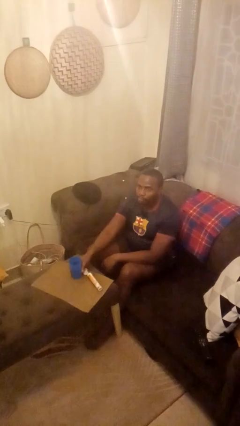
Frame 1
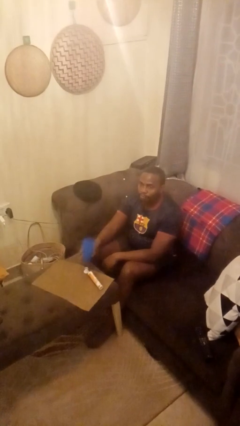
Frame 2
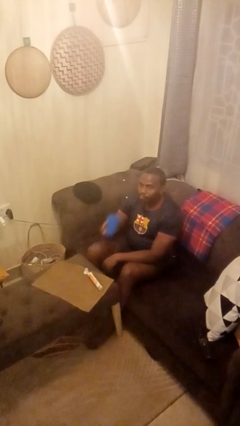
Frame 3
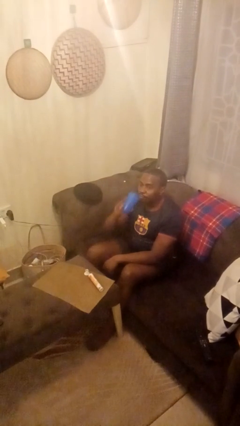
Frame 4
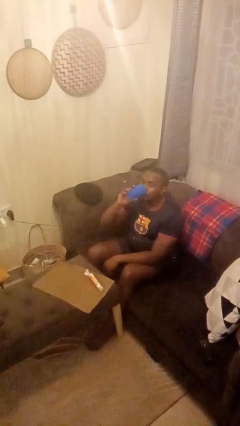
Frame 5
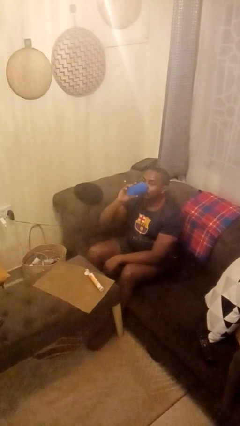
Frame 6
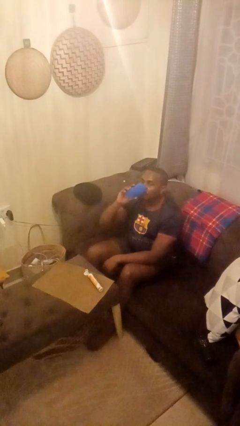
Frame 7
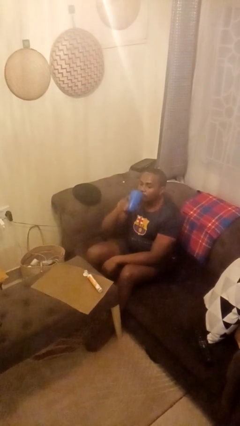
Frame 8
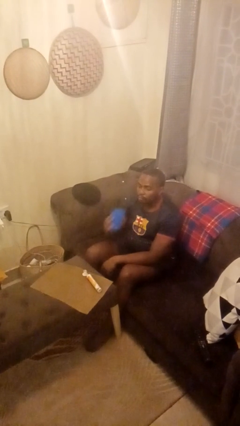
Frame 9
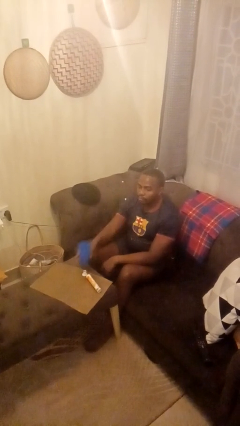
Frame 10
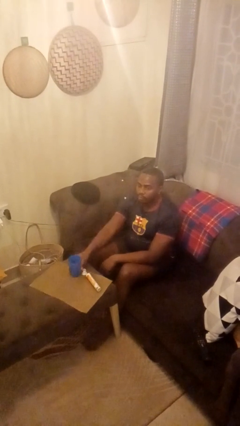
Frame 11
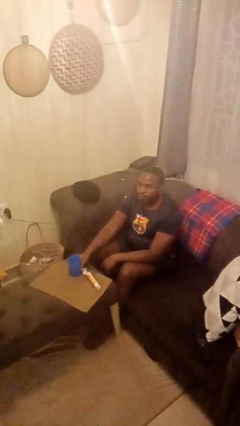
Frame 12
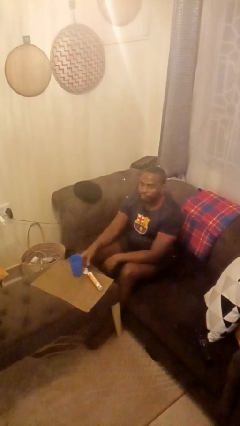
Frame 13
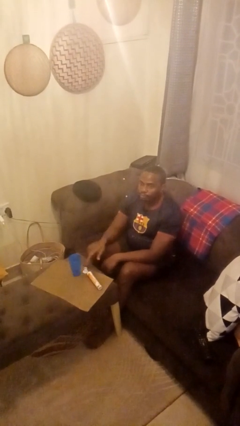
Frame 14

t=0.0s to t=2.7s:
person drinks from cup

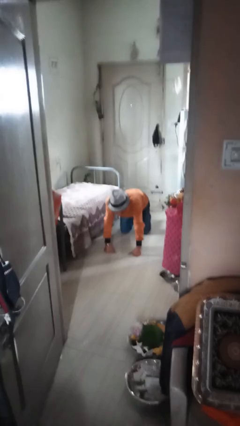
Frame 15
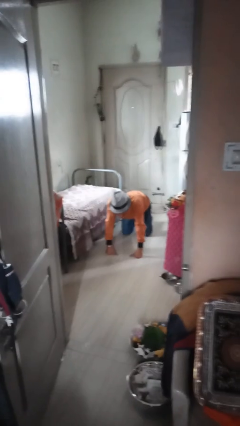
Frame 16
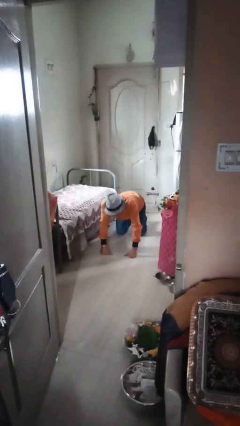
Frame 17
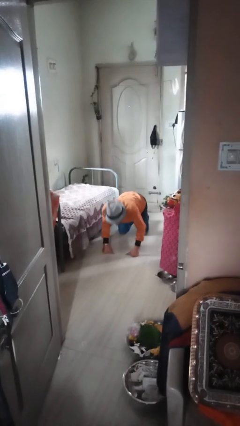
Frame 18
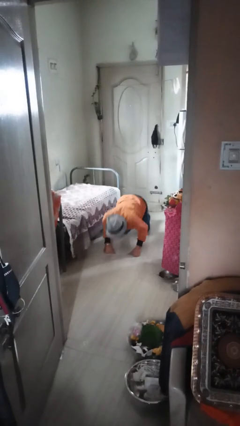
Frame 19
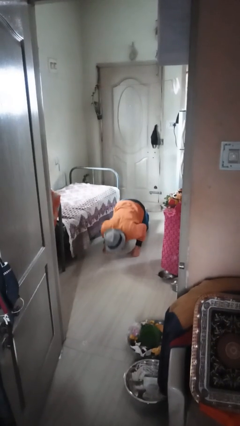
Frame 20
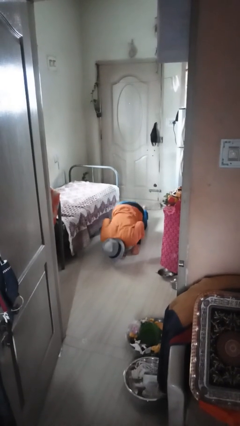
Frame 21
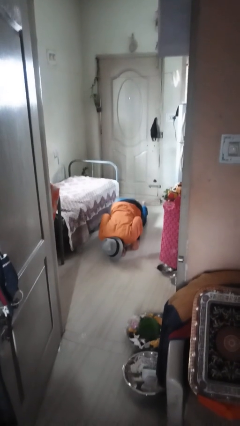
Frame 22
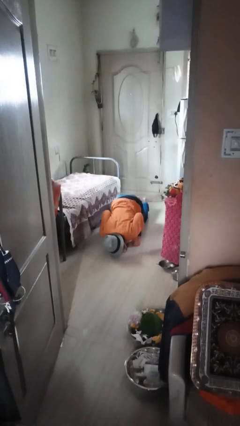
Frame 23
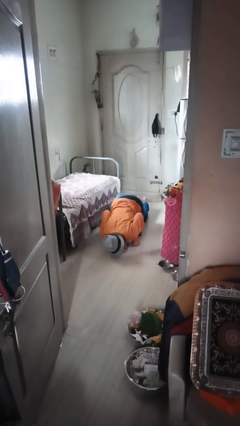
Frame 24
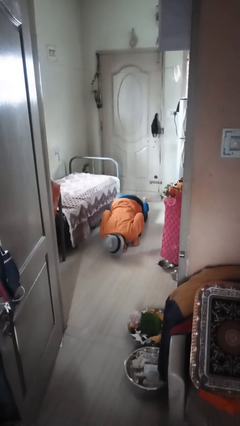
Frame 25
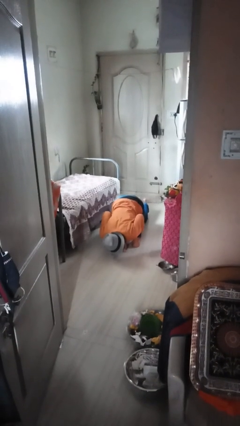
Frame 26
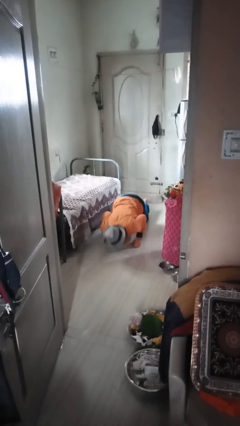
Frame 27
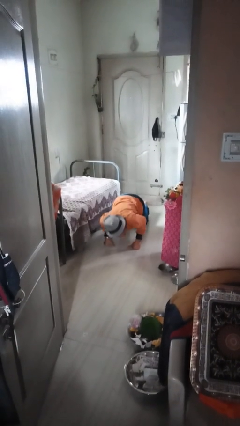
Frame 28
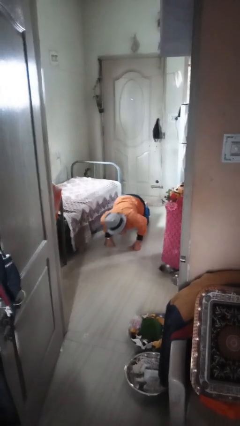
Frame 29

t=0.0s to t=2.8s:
person exercises with pushup

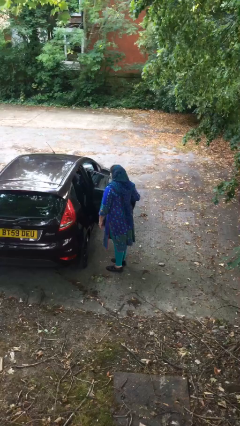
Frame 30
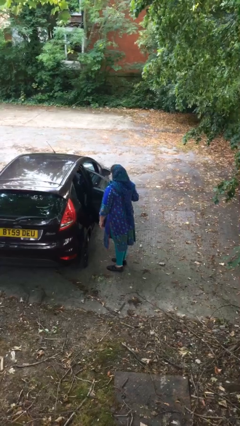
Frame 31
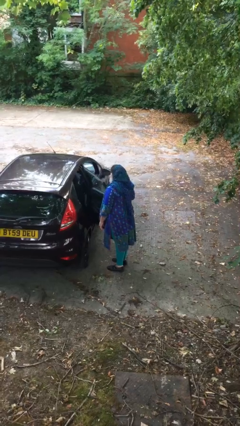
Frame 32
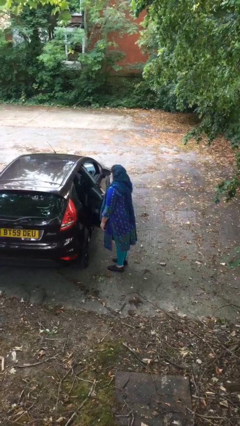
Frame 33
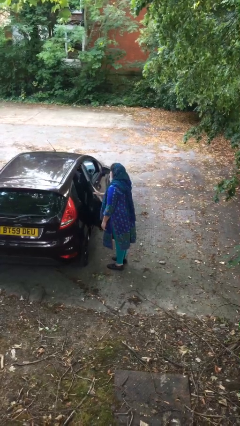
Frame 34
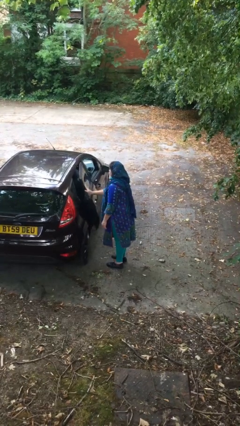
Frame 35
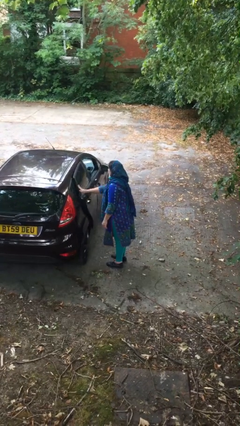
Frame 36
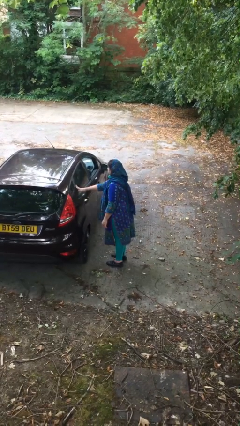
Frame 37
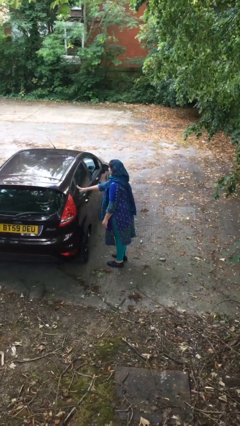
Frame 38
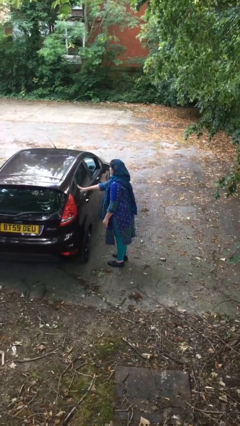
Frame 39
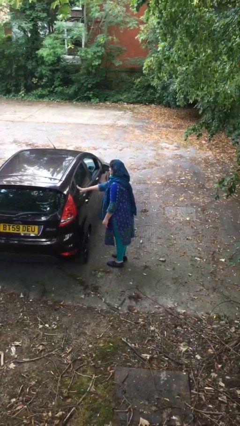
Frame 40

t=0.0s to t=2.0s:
person closes car door

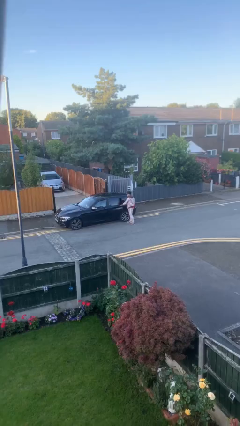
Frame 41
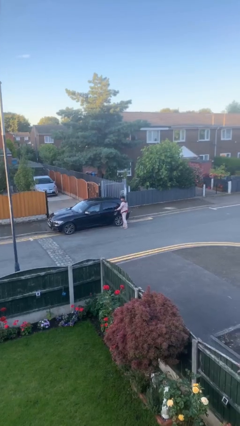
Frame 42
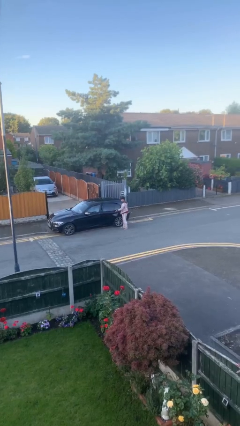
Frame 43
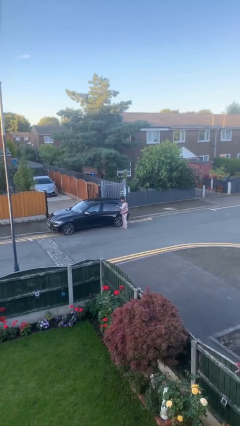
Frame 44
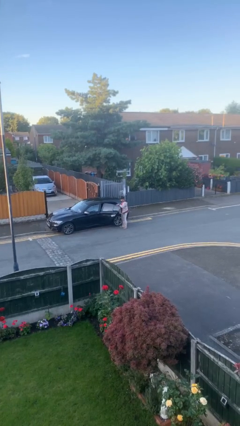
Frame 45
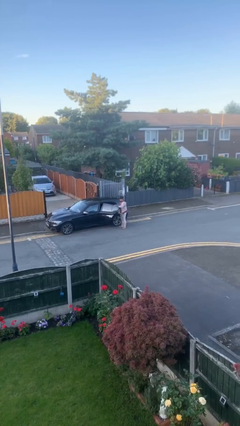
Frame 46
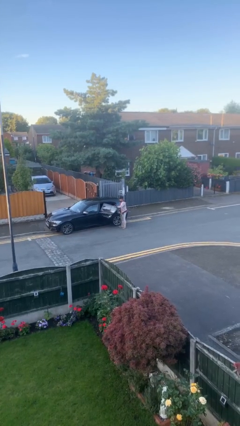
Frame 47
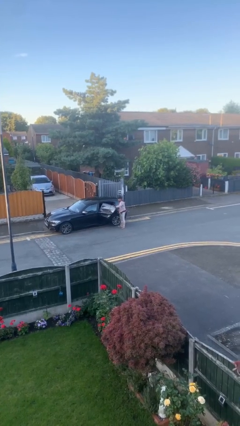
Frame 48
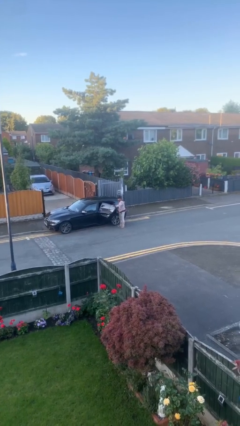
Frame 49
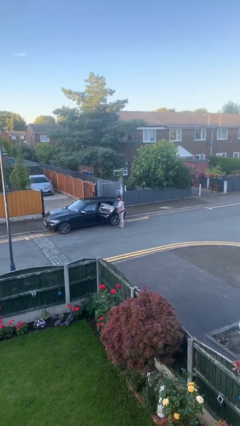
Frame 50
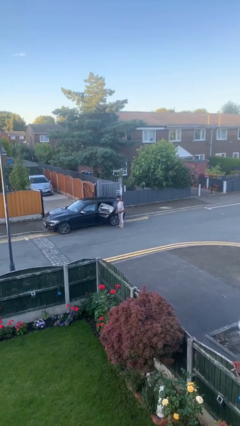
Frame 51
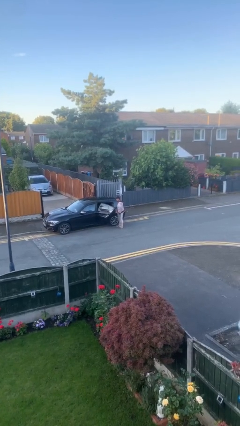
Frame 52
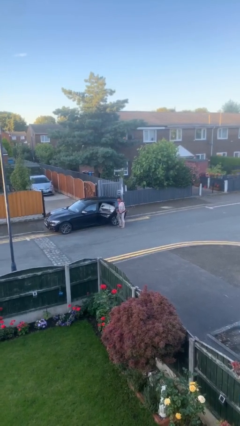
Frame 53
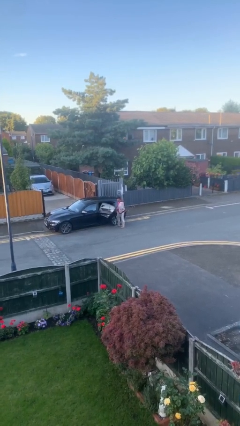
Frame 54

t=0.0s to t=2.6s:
person opens car door

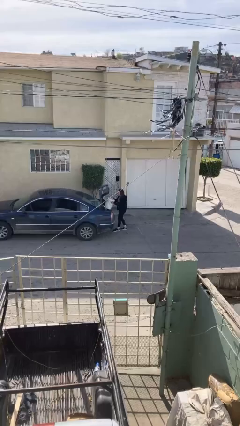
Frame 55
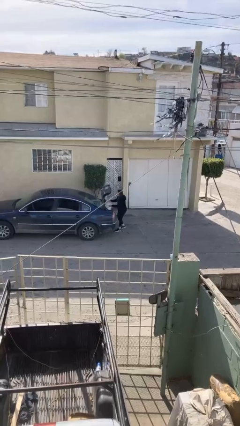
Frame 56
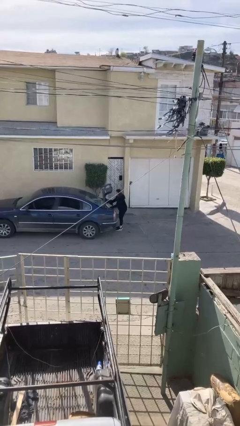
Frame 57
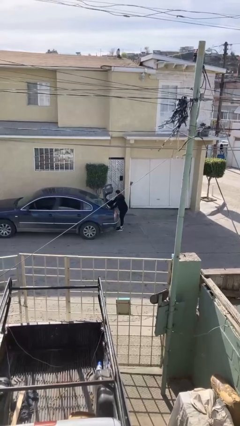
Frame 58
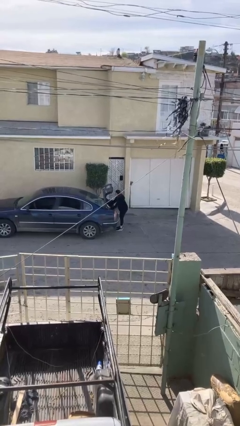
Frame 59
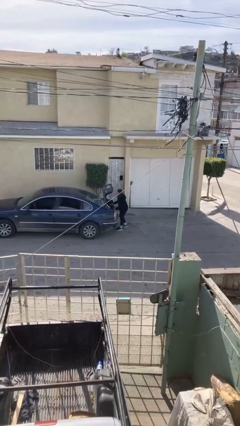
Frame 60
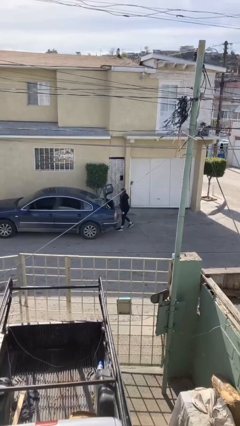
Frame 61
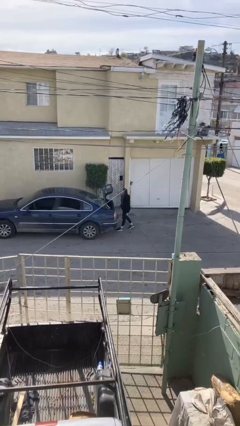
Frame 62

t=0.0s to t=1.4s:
person loads car

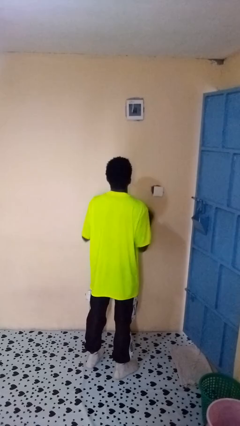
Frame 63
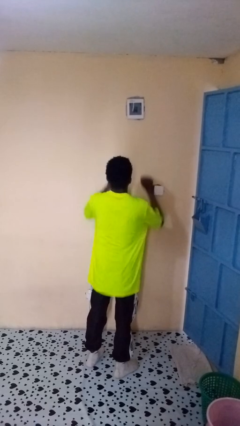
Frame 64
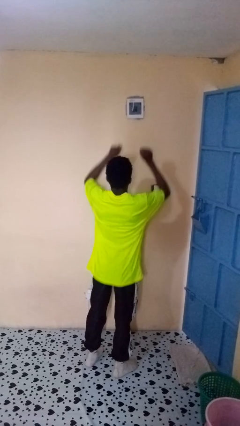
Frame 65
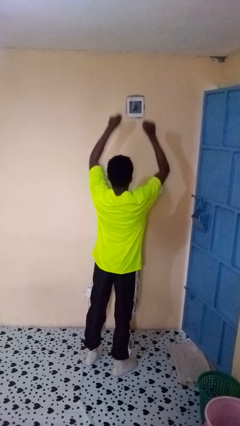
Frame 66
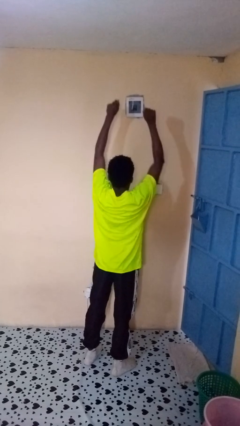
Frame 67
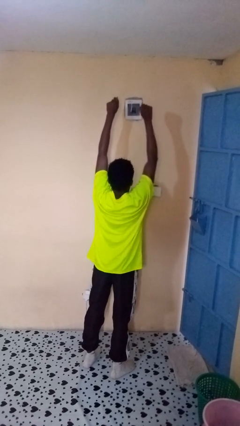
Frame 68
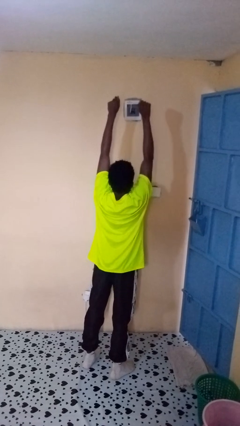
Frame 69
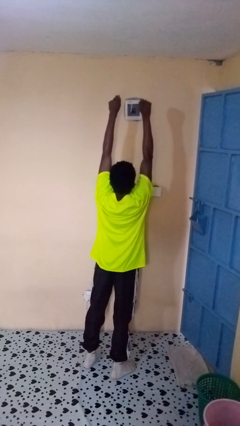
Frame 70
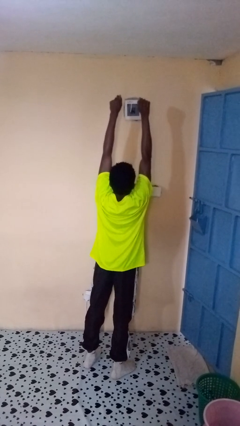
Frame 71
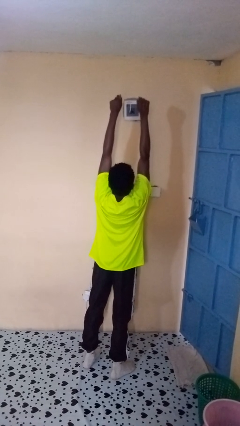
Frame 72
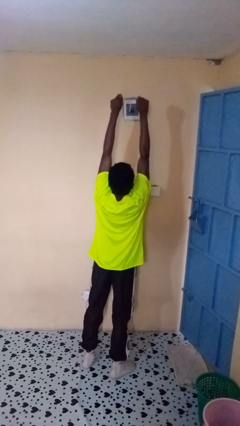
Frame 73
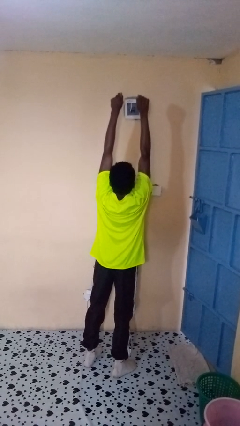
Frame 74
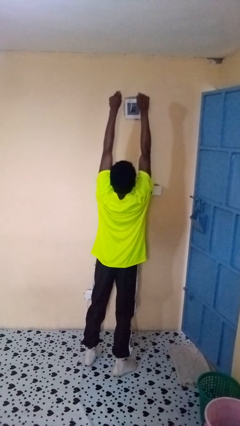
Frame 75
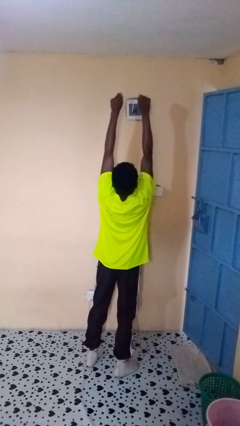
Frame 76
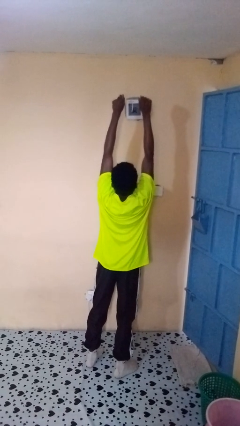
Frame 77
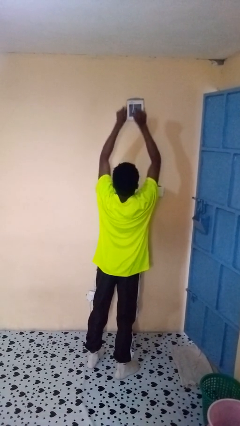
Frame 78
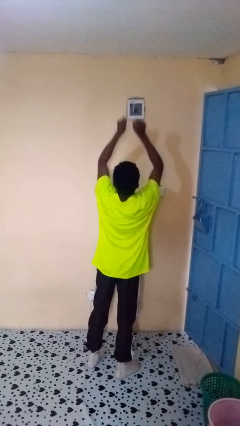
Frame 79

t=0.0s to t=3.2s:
person stretches arms over head

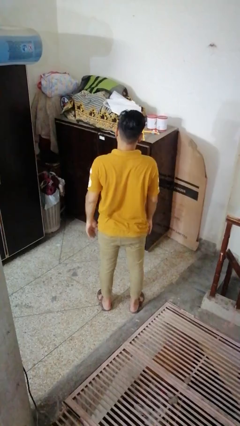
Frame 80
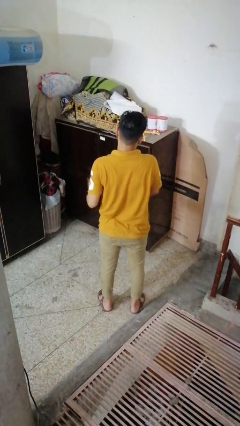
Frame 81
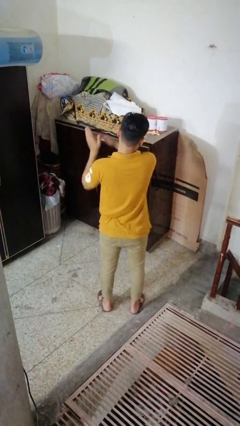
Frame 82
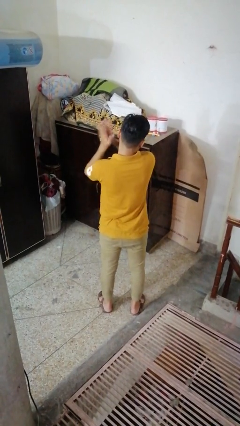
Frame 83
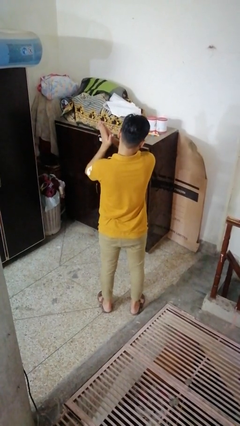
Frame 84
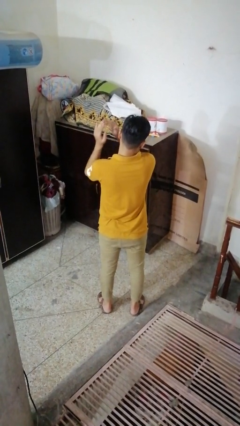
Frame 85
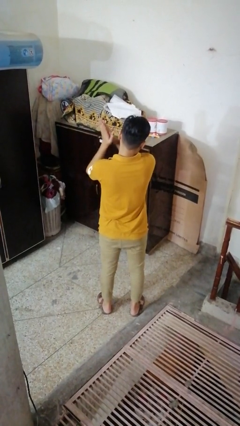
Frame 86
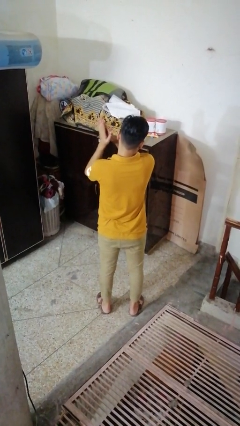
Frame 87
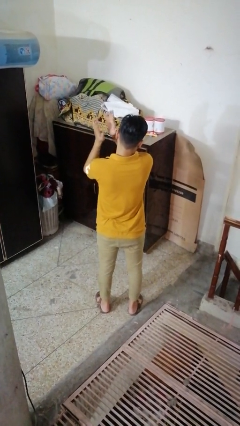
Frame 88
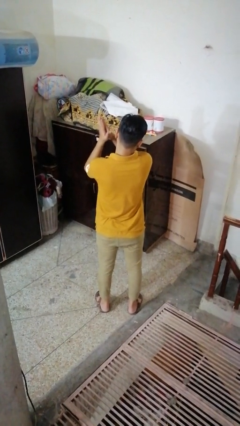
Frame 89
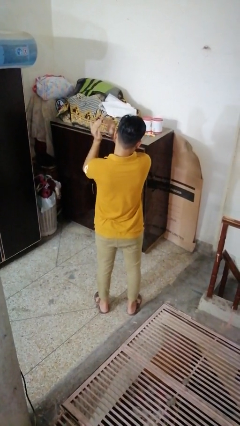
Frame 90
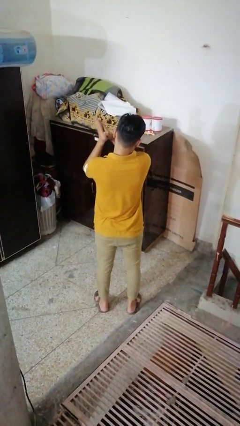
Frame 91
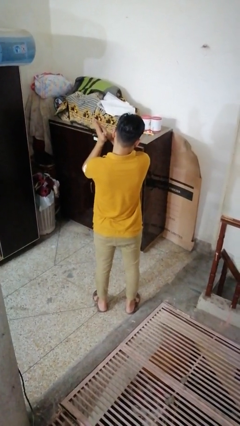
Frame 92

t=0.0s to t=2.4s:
person claps hands
